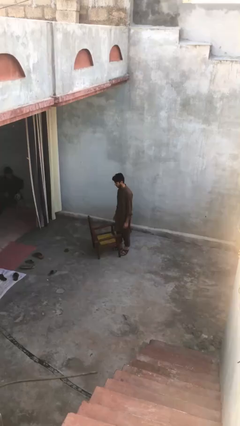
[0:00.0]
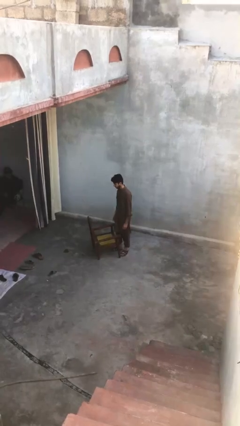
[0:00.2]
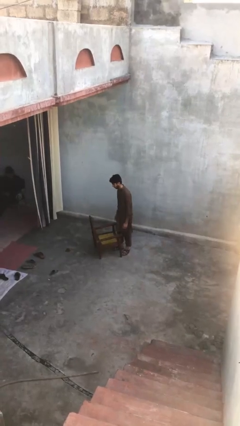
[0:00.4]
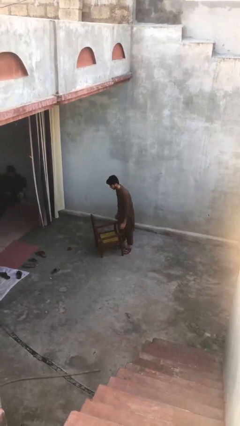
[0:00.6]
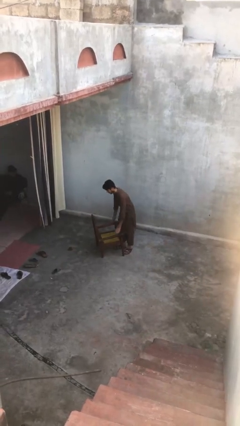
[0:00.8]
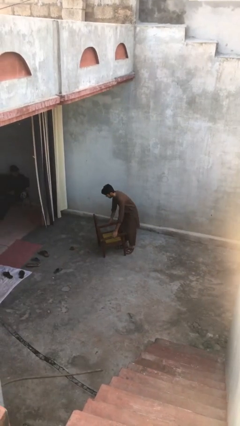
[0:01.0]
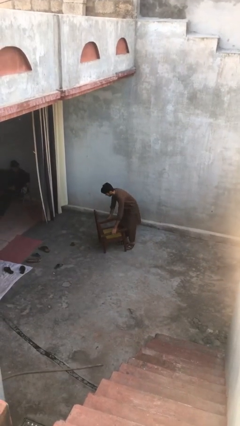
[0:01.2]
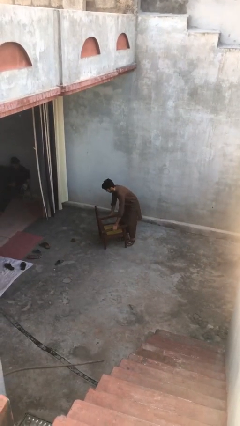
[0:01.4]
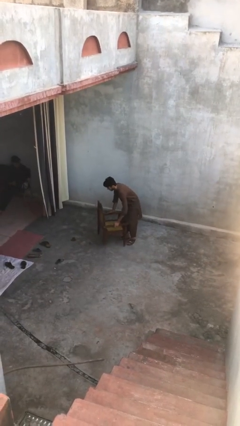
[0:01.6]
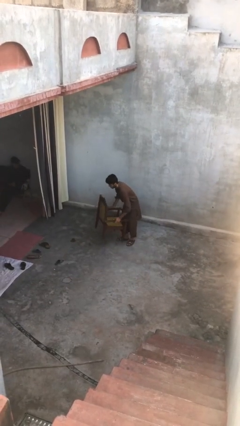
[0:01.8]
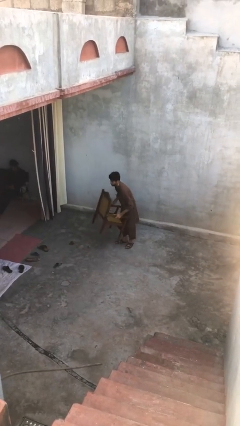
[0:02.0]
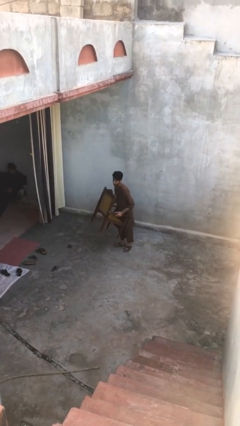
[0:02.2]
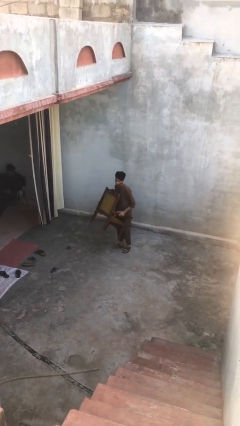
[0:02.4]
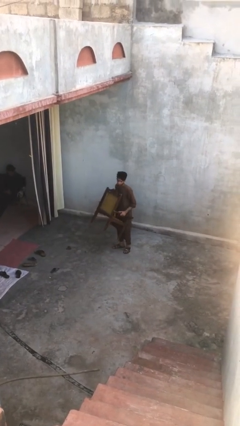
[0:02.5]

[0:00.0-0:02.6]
person picks up object from floor

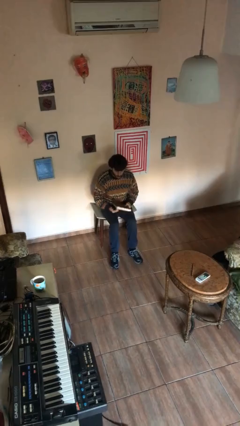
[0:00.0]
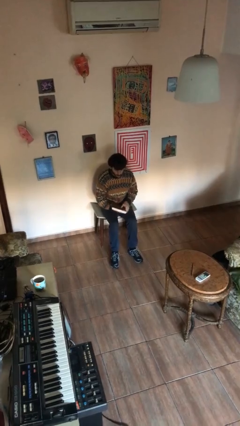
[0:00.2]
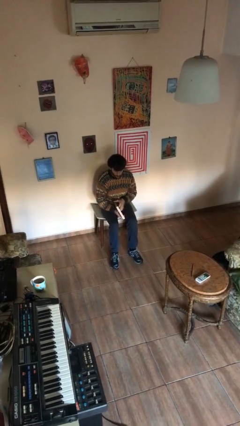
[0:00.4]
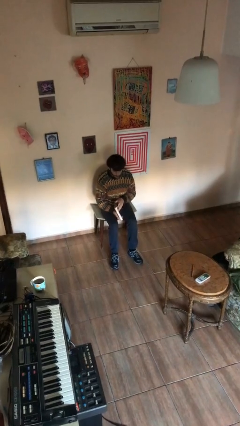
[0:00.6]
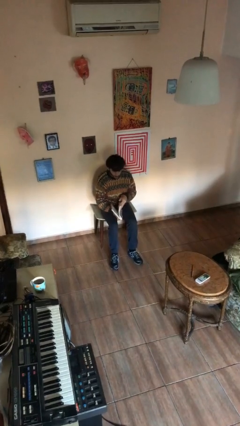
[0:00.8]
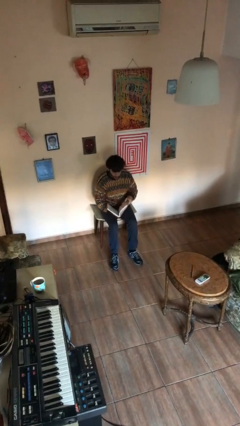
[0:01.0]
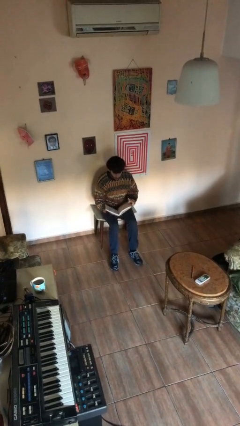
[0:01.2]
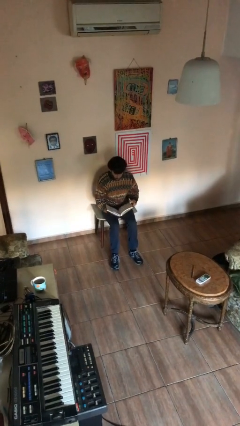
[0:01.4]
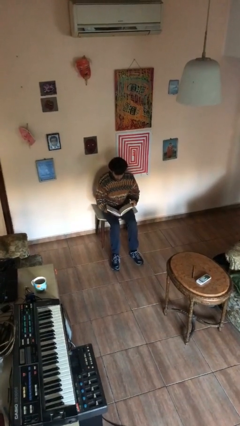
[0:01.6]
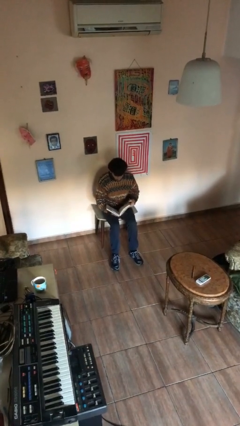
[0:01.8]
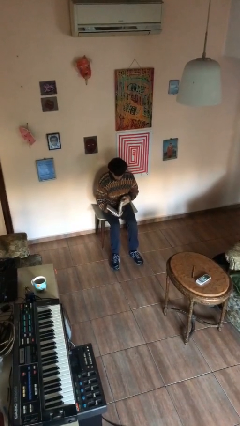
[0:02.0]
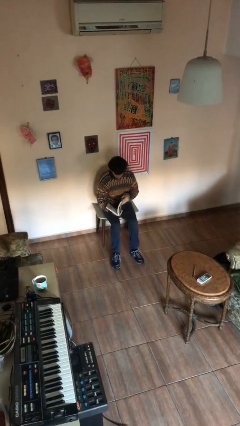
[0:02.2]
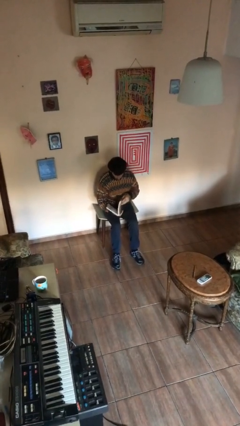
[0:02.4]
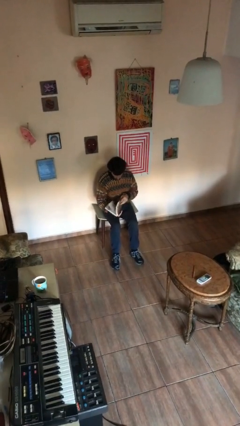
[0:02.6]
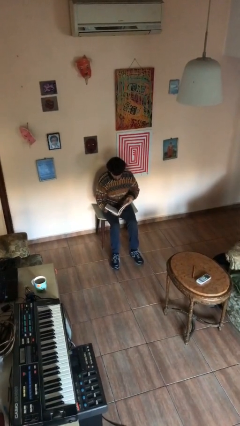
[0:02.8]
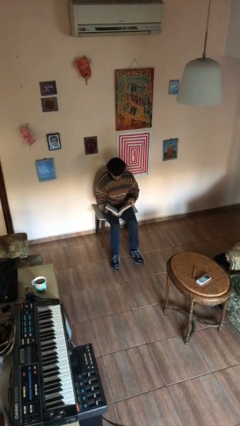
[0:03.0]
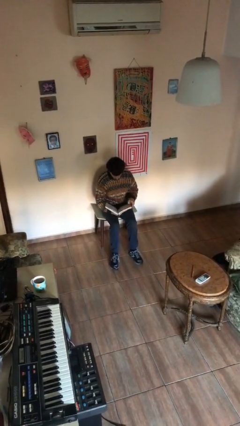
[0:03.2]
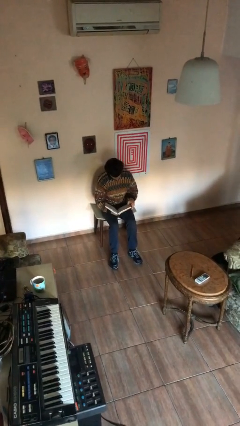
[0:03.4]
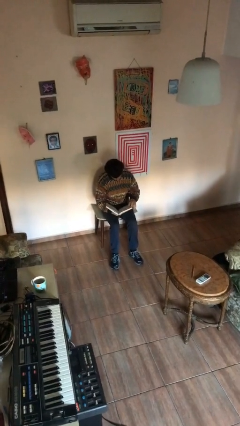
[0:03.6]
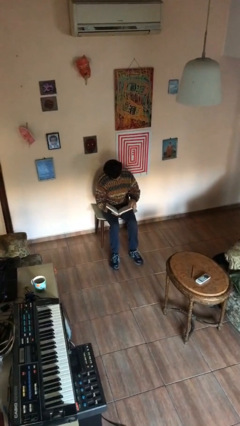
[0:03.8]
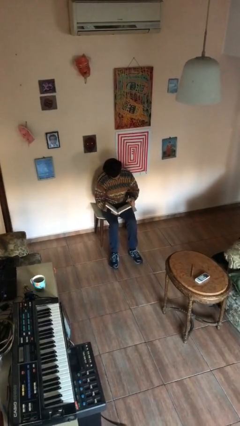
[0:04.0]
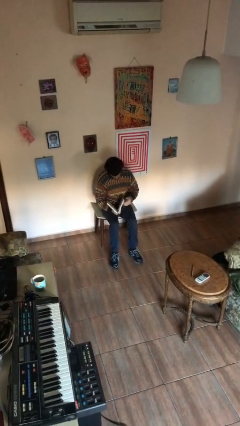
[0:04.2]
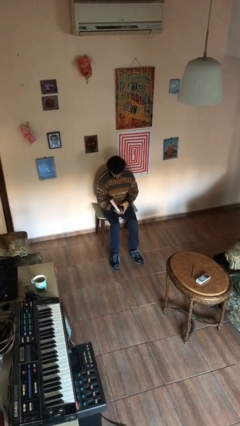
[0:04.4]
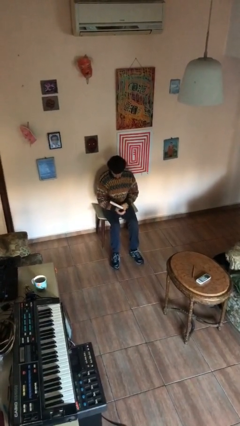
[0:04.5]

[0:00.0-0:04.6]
person reads book

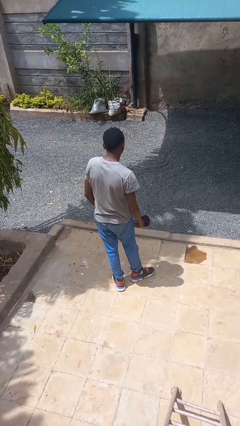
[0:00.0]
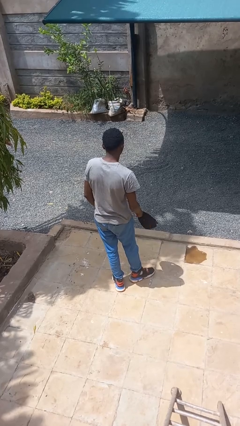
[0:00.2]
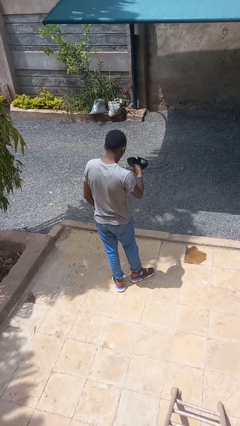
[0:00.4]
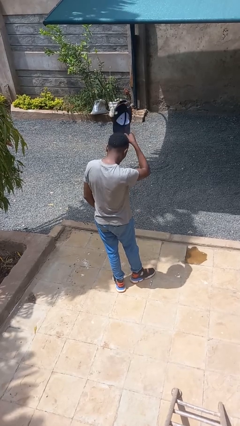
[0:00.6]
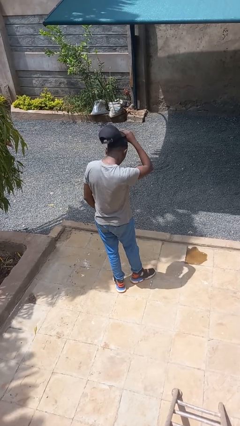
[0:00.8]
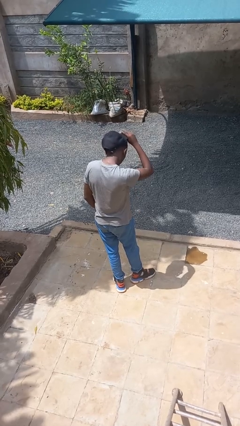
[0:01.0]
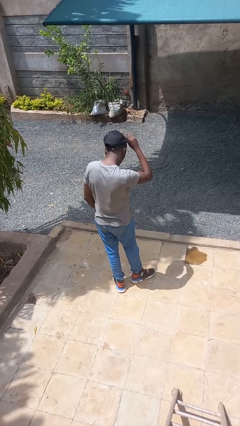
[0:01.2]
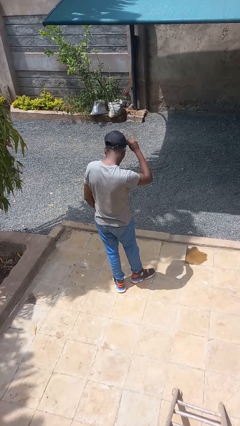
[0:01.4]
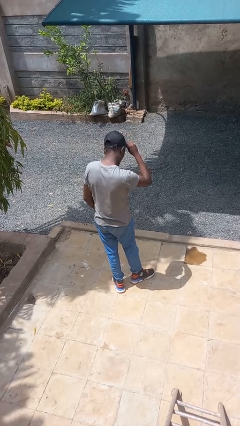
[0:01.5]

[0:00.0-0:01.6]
person puts on hat

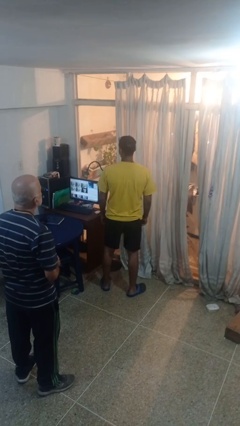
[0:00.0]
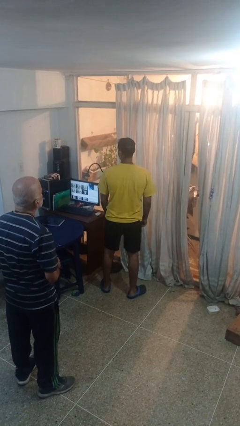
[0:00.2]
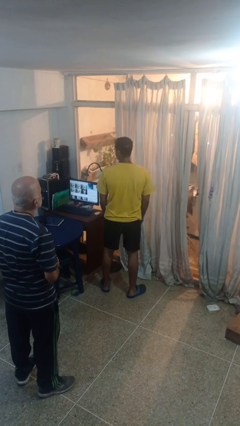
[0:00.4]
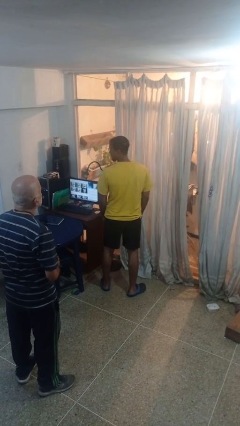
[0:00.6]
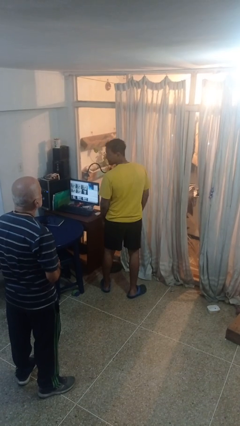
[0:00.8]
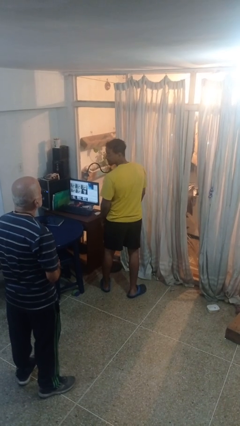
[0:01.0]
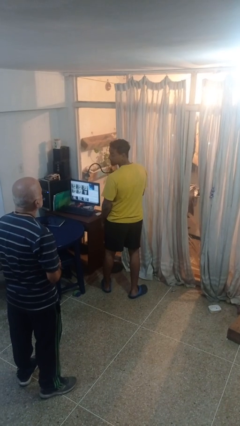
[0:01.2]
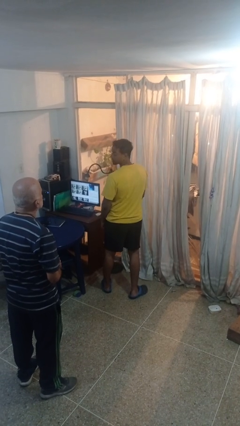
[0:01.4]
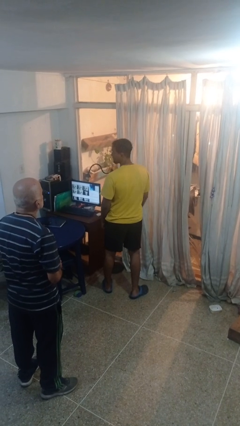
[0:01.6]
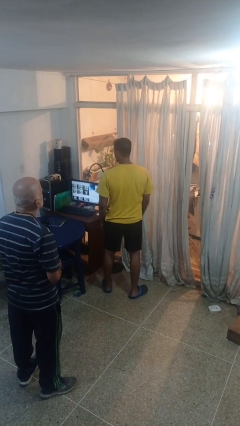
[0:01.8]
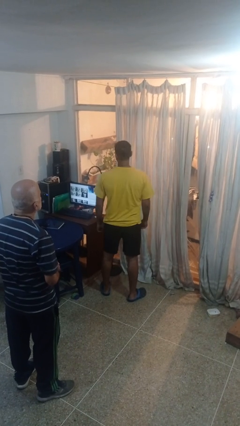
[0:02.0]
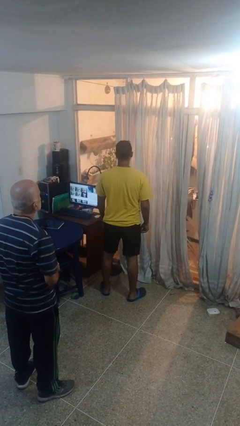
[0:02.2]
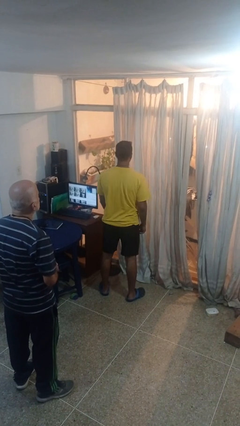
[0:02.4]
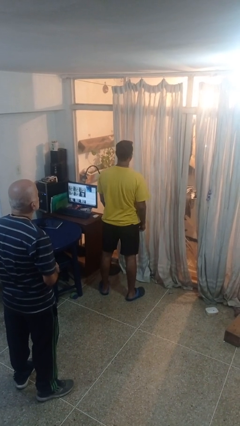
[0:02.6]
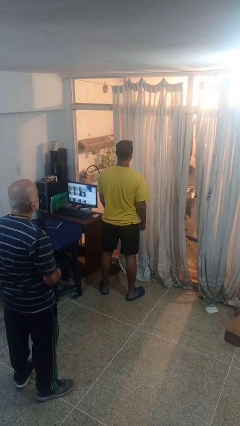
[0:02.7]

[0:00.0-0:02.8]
person looks over shoulder

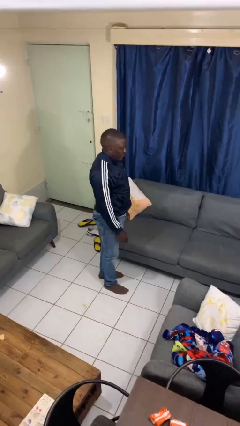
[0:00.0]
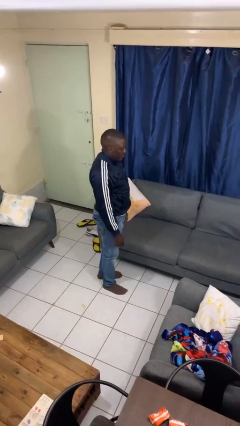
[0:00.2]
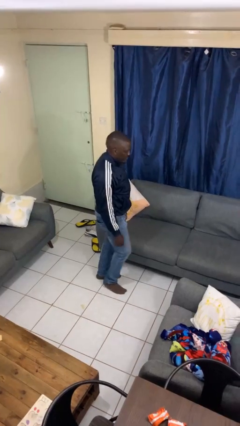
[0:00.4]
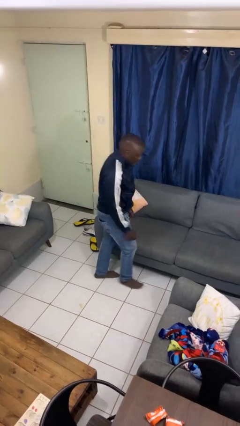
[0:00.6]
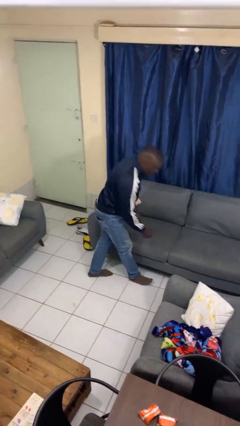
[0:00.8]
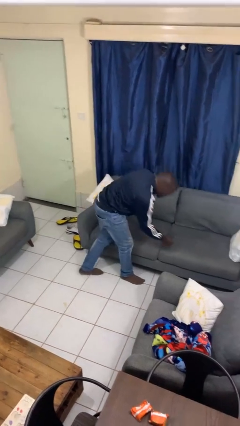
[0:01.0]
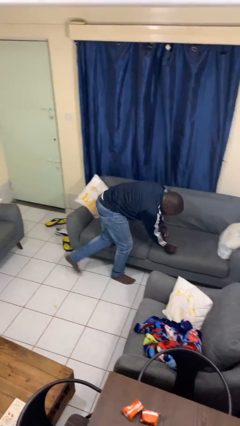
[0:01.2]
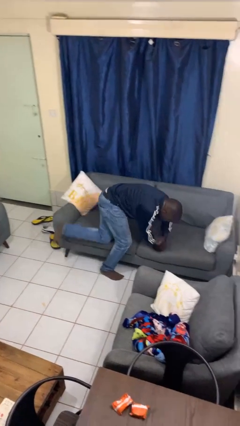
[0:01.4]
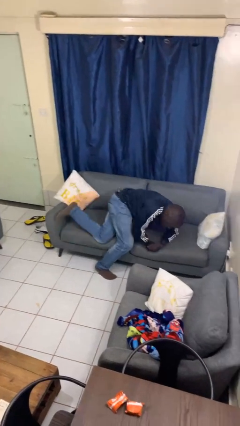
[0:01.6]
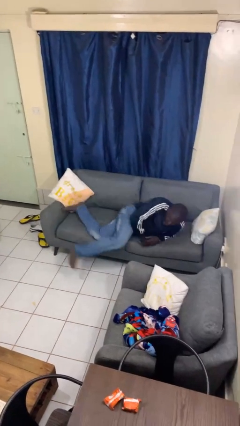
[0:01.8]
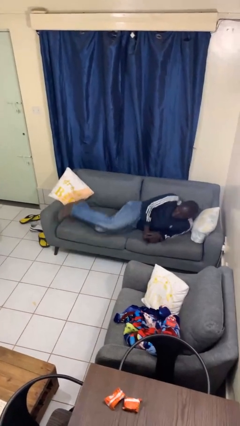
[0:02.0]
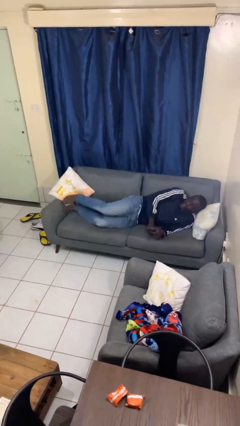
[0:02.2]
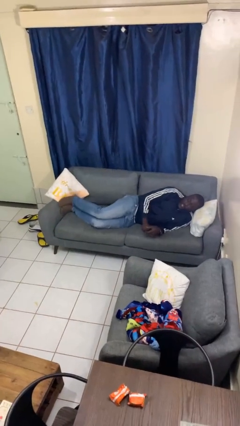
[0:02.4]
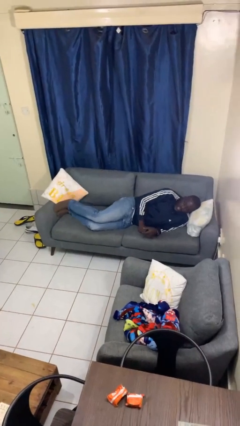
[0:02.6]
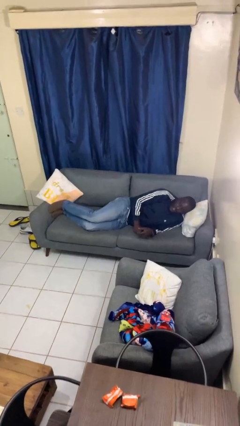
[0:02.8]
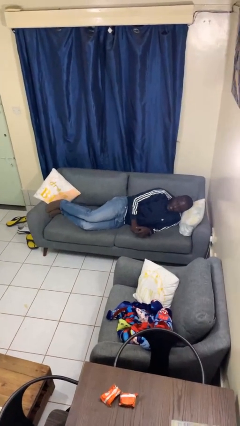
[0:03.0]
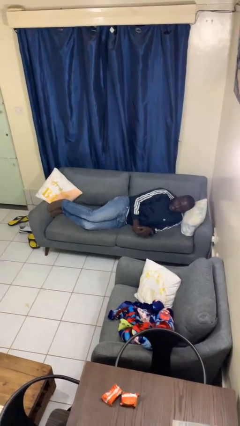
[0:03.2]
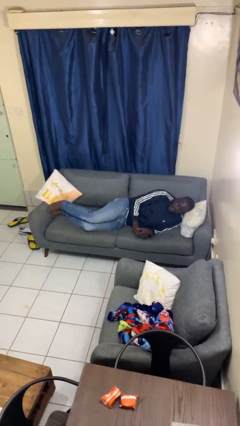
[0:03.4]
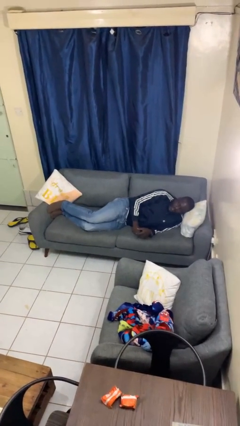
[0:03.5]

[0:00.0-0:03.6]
person lies down on couch

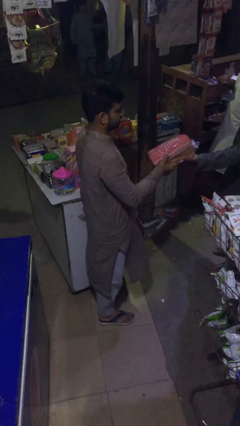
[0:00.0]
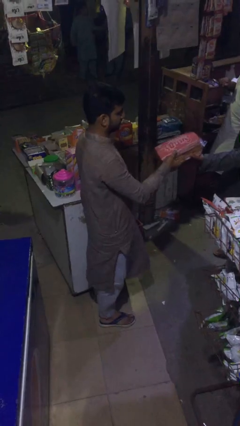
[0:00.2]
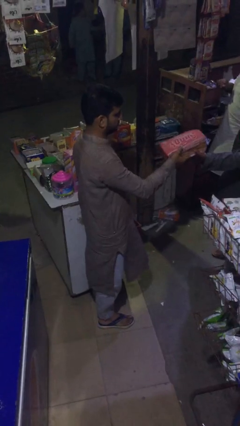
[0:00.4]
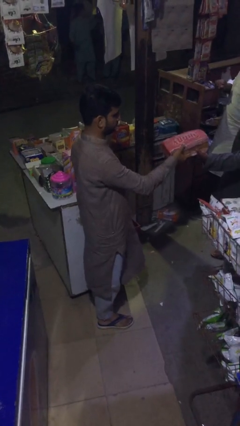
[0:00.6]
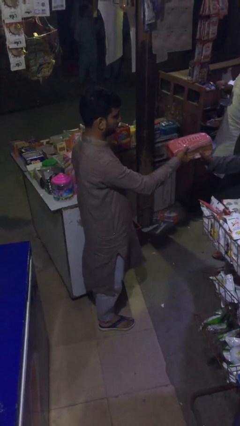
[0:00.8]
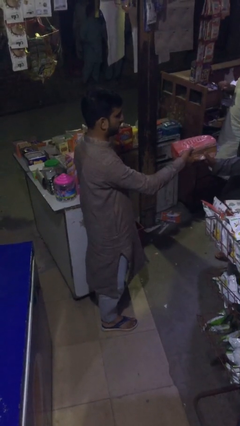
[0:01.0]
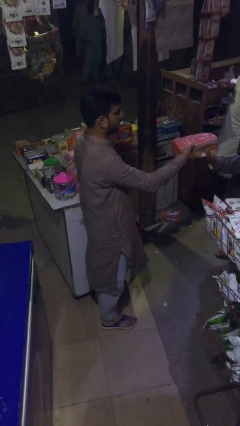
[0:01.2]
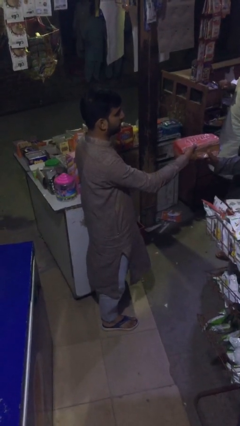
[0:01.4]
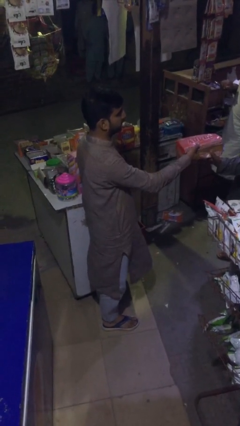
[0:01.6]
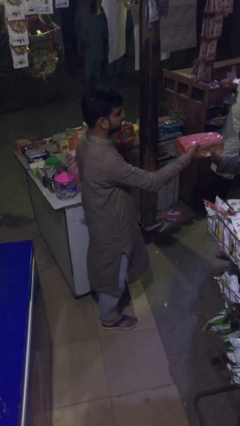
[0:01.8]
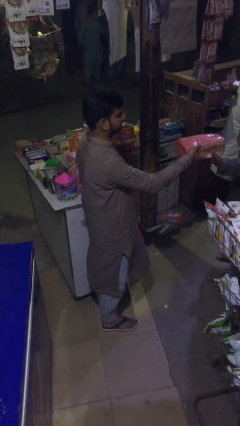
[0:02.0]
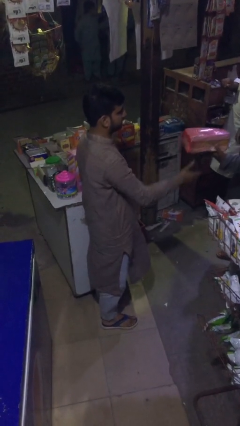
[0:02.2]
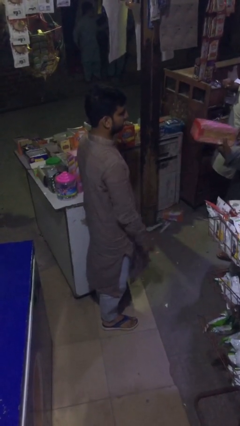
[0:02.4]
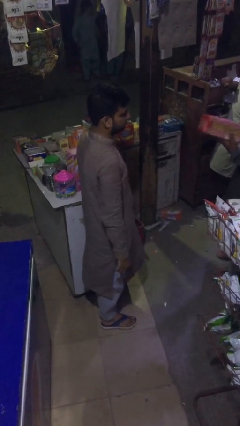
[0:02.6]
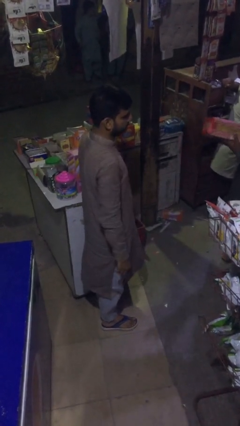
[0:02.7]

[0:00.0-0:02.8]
person transfers object to person
